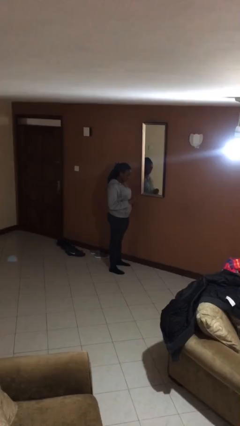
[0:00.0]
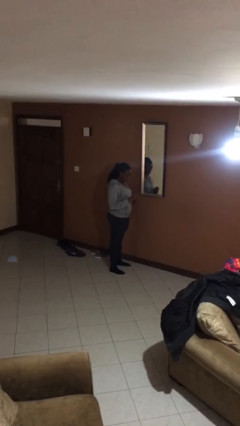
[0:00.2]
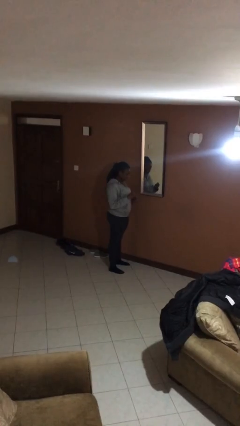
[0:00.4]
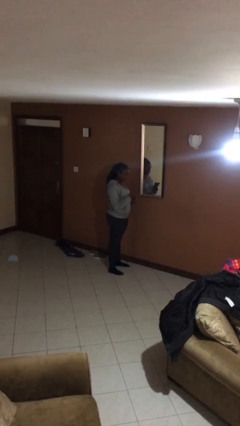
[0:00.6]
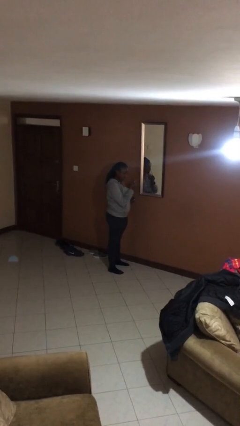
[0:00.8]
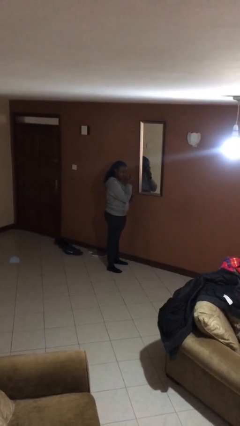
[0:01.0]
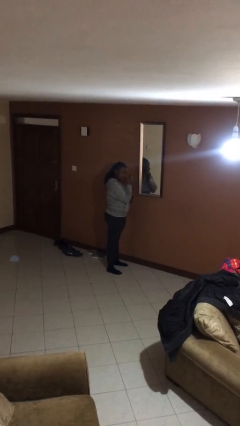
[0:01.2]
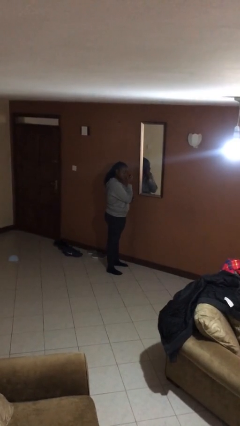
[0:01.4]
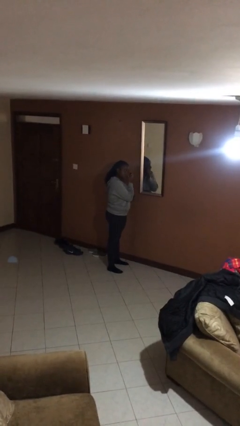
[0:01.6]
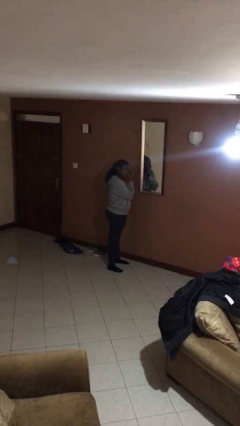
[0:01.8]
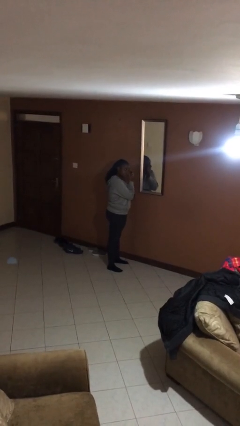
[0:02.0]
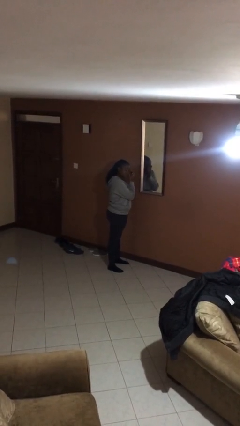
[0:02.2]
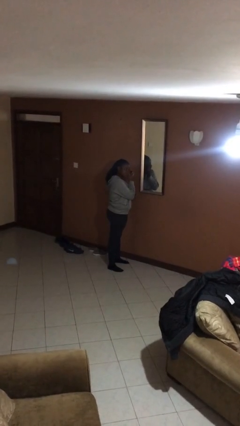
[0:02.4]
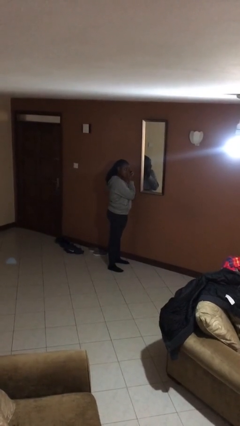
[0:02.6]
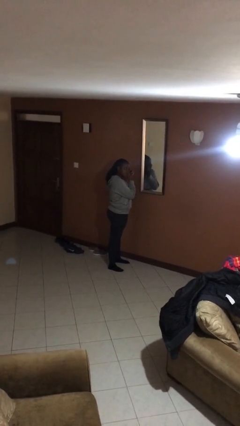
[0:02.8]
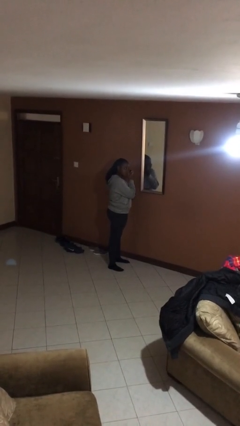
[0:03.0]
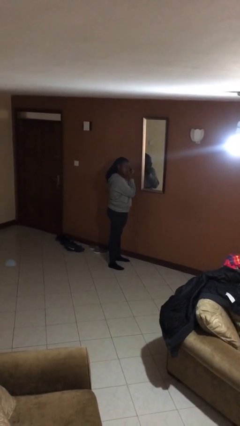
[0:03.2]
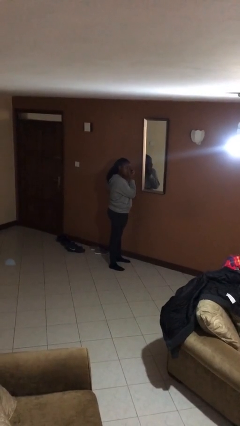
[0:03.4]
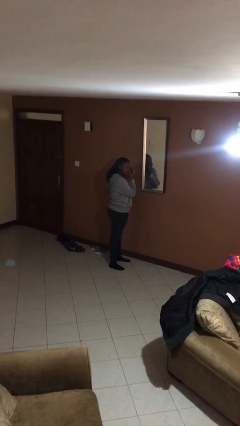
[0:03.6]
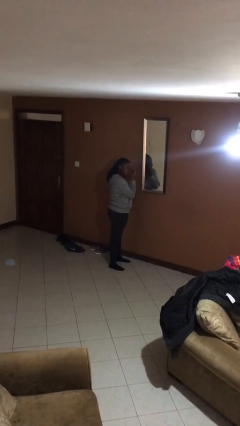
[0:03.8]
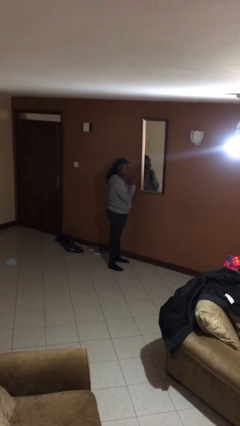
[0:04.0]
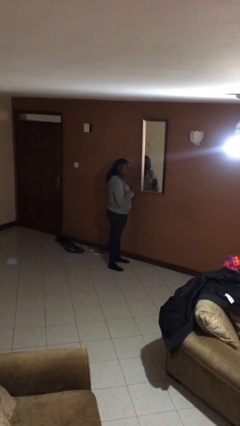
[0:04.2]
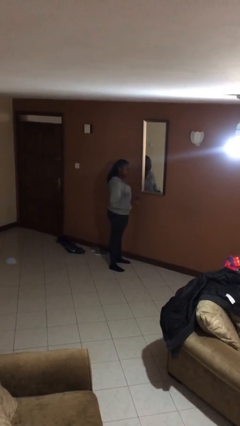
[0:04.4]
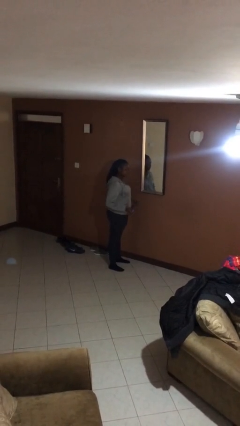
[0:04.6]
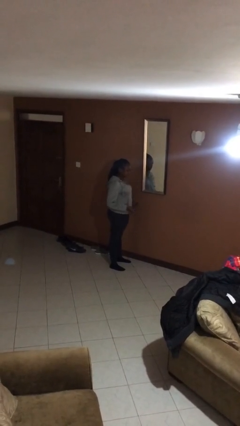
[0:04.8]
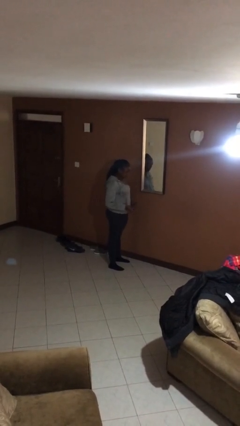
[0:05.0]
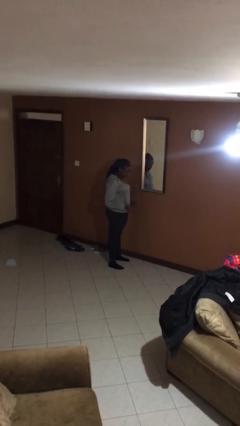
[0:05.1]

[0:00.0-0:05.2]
person applies eye makeup

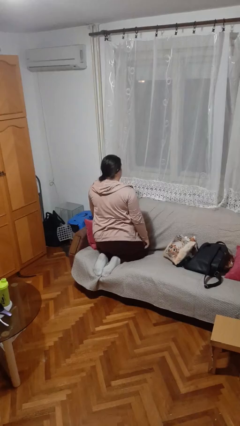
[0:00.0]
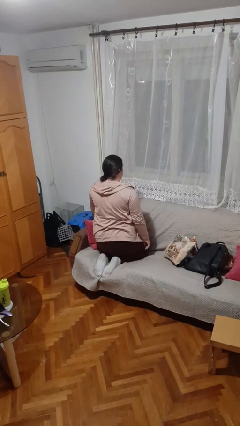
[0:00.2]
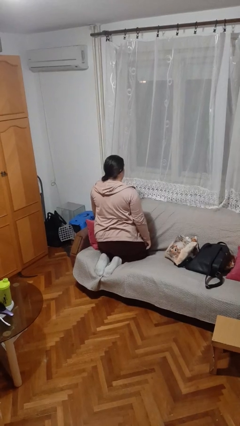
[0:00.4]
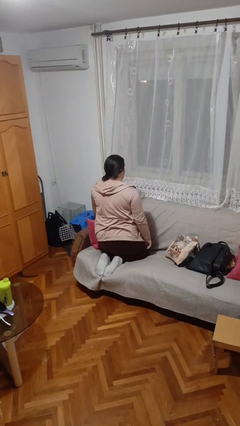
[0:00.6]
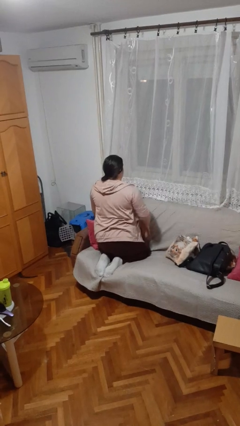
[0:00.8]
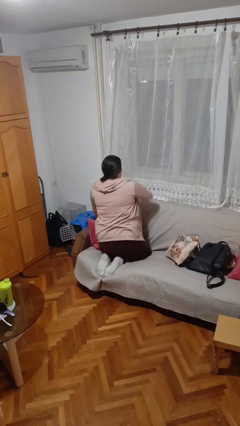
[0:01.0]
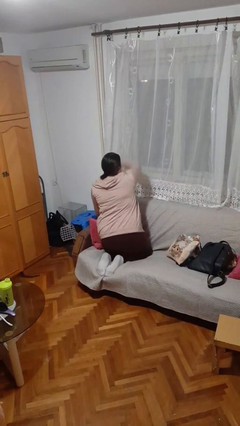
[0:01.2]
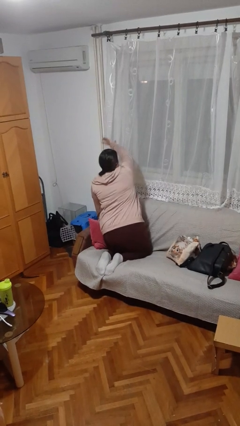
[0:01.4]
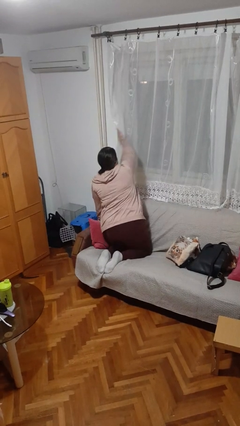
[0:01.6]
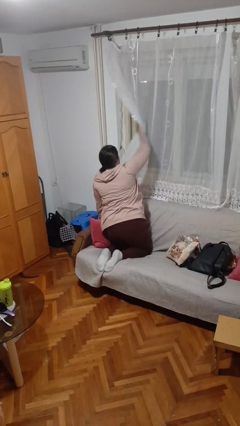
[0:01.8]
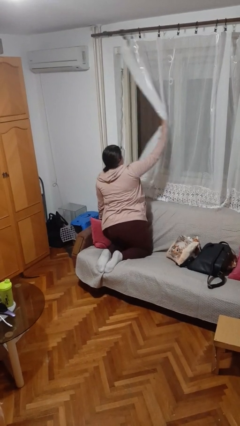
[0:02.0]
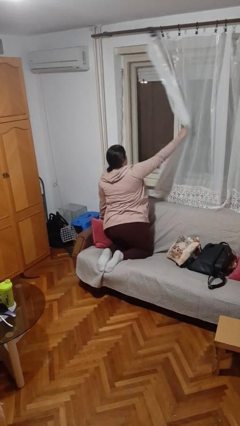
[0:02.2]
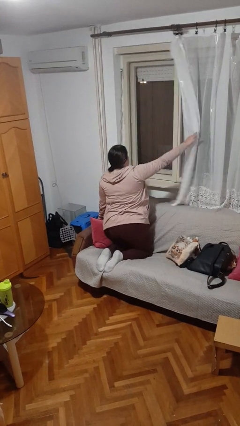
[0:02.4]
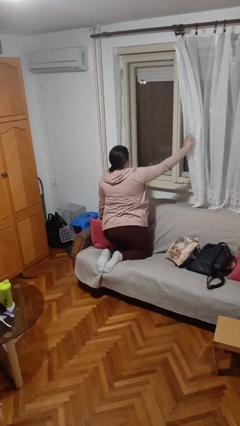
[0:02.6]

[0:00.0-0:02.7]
person opens curtains

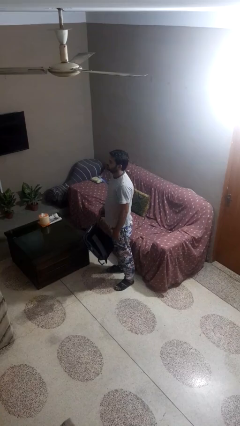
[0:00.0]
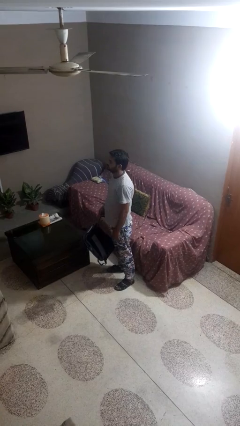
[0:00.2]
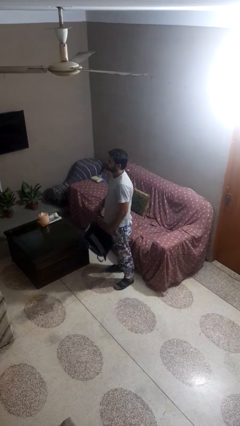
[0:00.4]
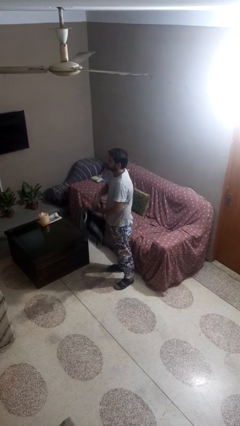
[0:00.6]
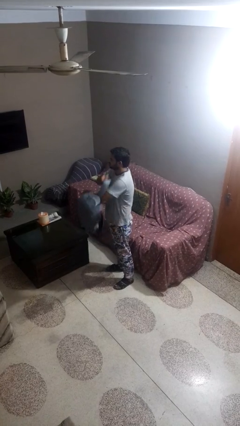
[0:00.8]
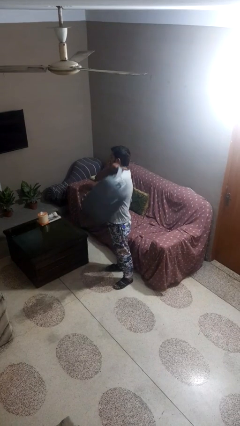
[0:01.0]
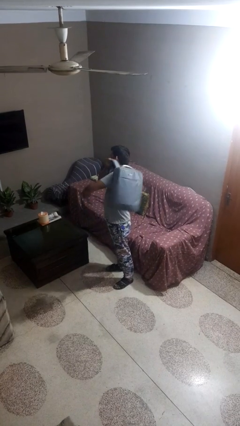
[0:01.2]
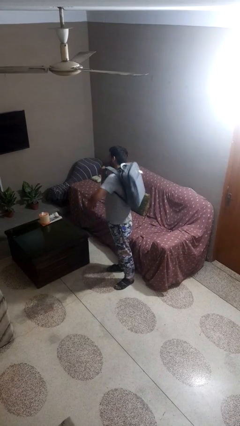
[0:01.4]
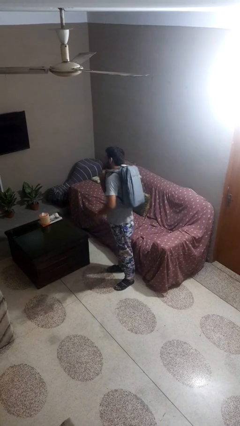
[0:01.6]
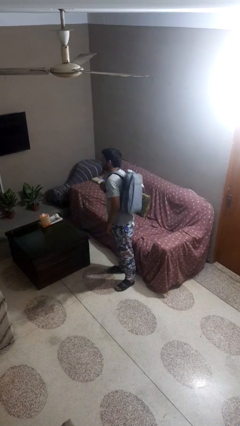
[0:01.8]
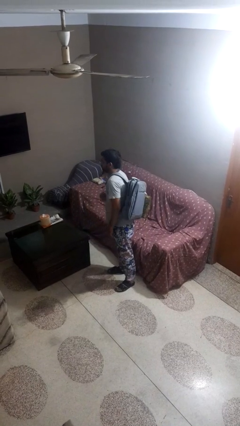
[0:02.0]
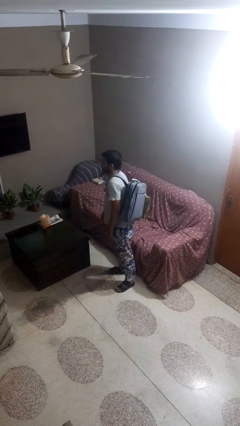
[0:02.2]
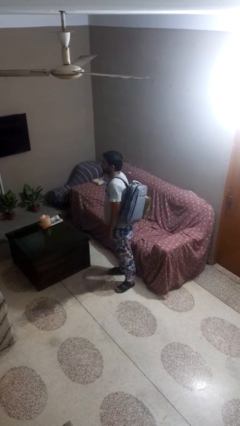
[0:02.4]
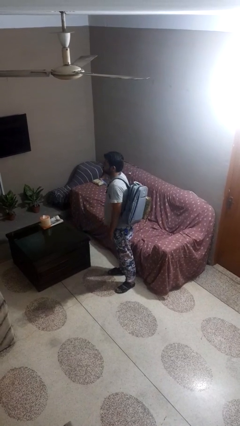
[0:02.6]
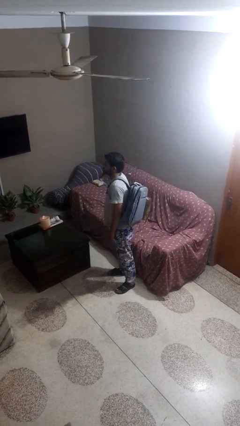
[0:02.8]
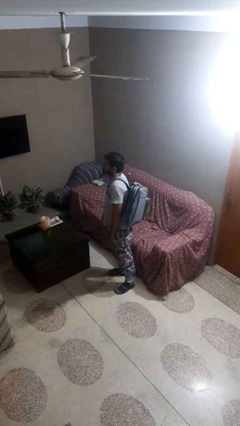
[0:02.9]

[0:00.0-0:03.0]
person puts on backpack

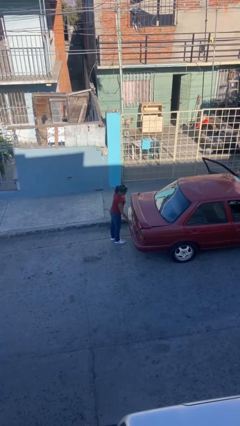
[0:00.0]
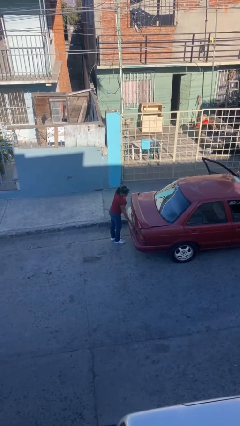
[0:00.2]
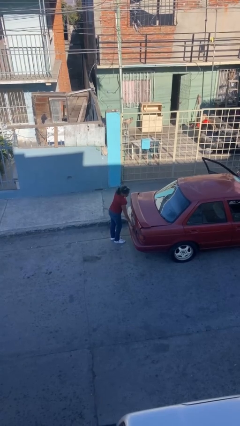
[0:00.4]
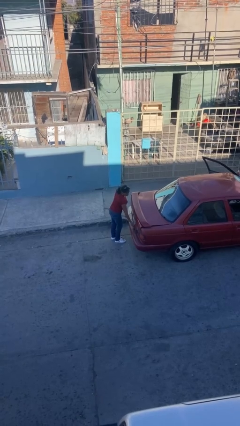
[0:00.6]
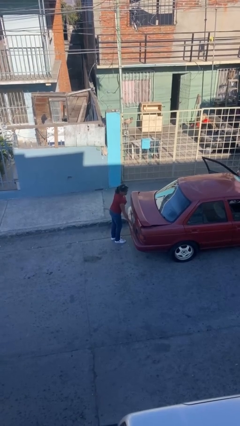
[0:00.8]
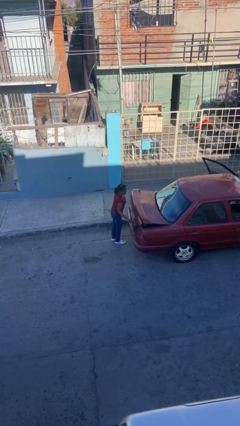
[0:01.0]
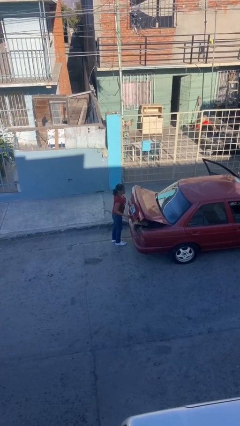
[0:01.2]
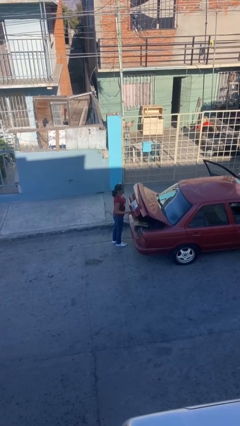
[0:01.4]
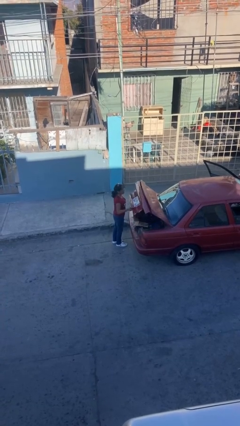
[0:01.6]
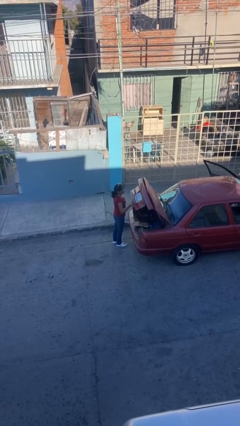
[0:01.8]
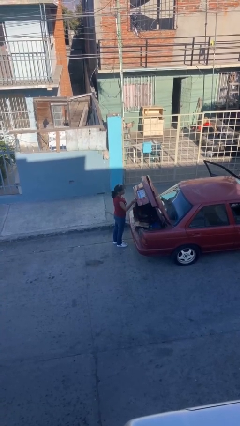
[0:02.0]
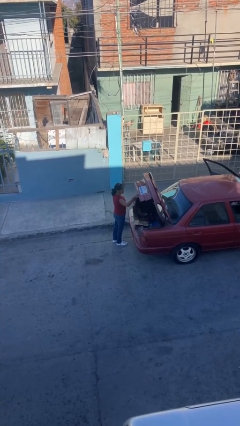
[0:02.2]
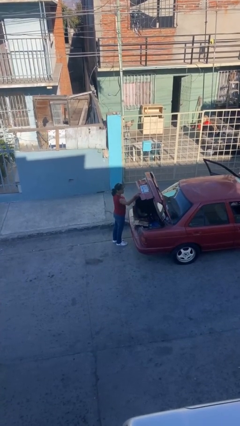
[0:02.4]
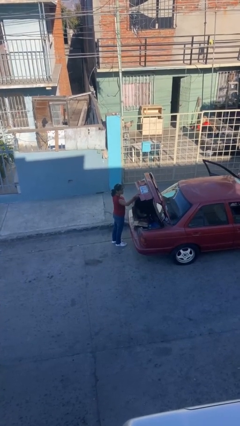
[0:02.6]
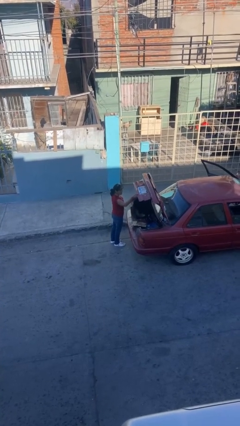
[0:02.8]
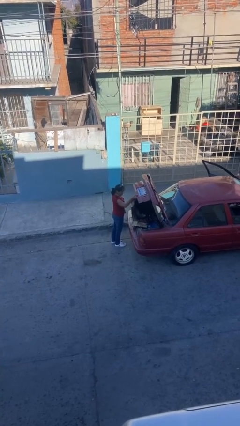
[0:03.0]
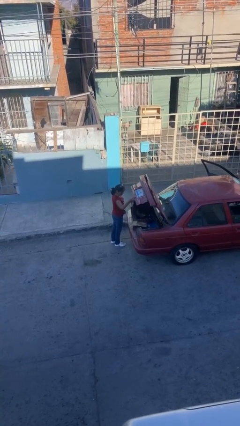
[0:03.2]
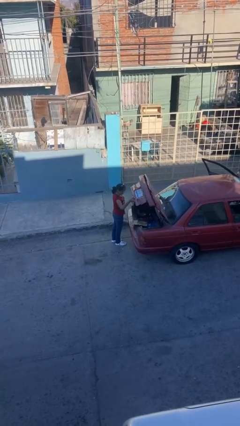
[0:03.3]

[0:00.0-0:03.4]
person opens car trunk

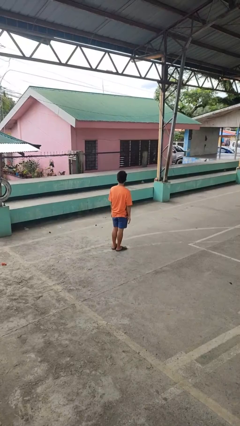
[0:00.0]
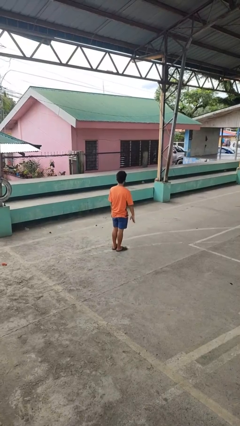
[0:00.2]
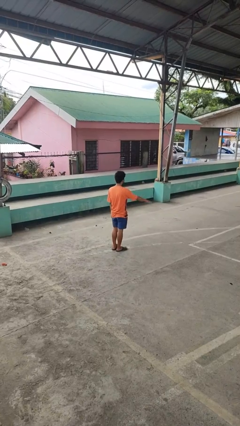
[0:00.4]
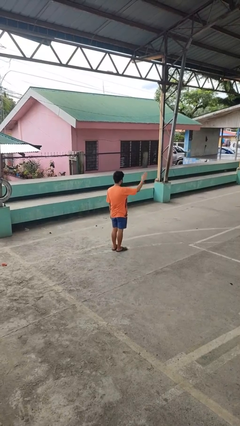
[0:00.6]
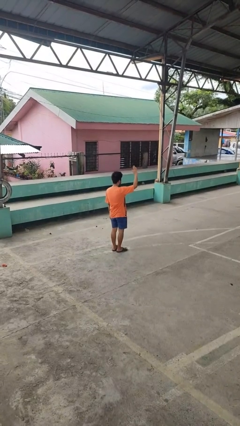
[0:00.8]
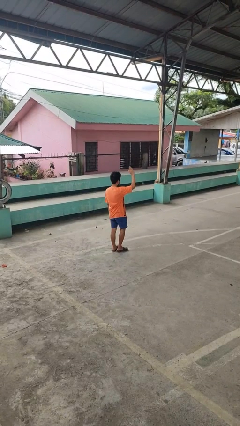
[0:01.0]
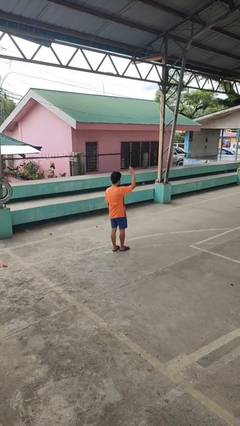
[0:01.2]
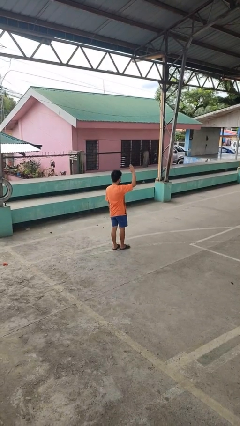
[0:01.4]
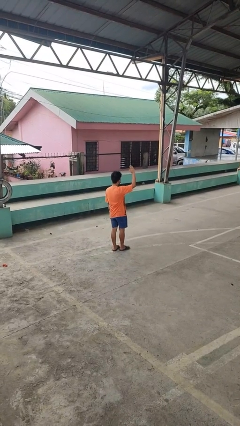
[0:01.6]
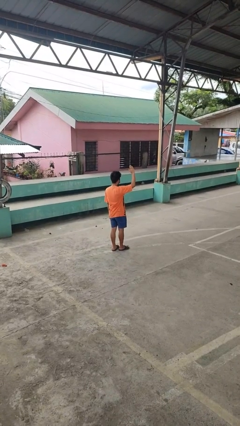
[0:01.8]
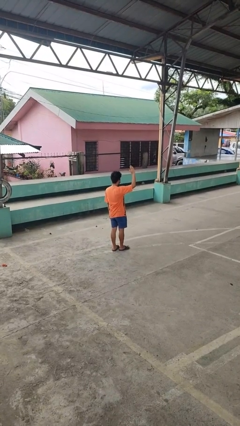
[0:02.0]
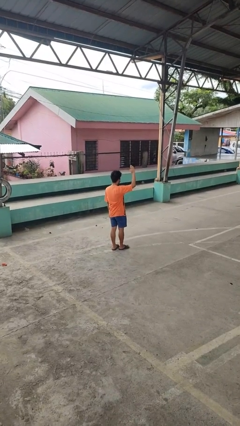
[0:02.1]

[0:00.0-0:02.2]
person gestures raise hand

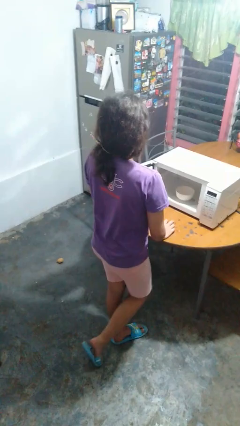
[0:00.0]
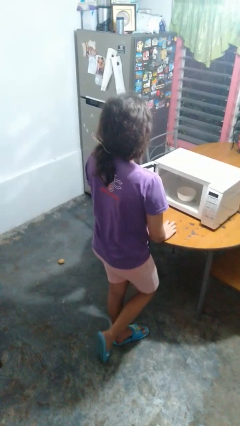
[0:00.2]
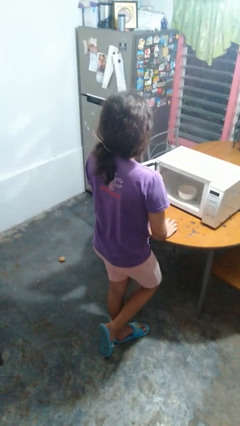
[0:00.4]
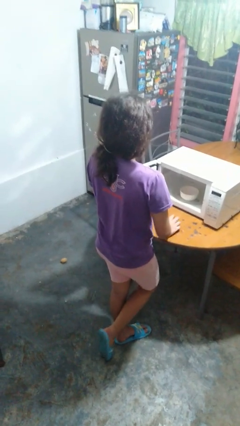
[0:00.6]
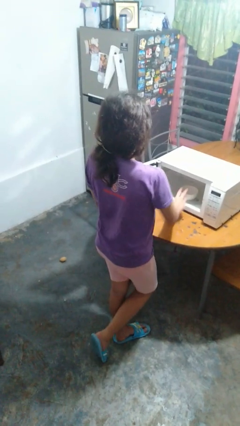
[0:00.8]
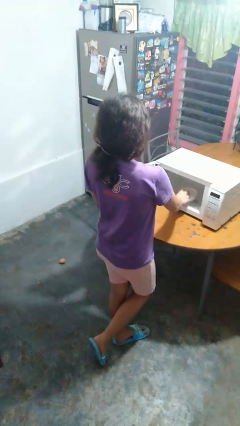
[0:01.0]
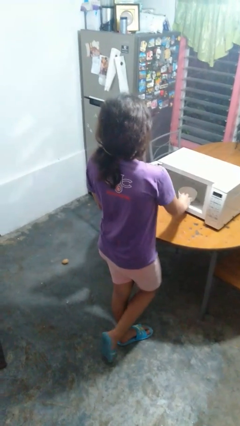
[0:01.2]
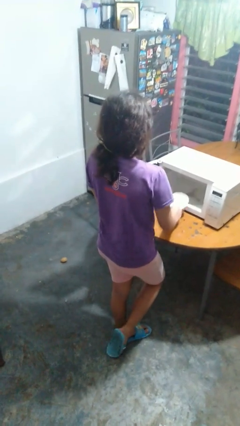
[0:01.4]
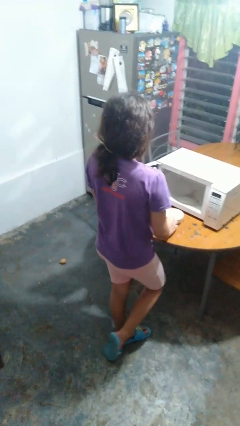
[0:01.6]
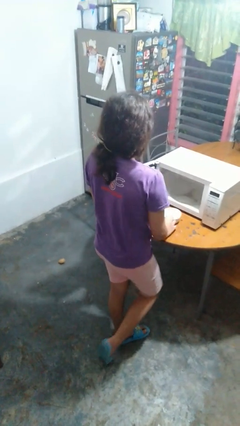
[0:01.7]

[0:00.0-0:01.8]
person takes object from microwave
